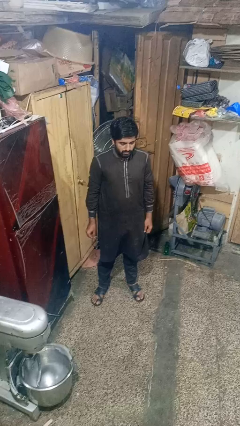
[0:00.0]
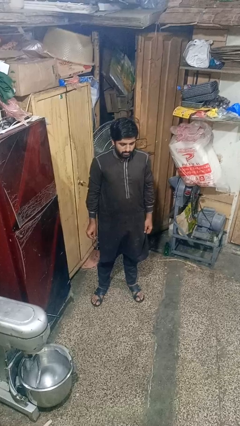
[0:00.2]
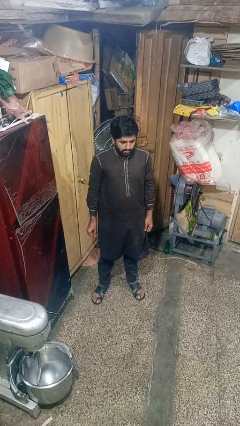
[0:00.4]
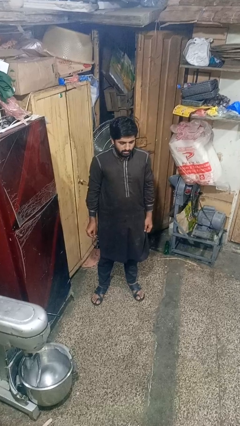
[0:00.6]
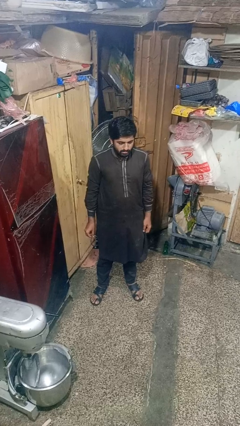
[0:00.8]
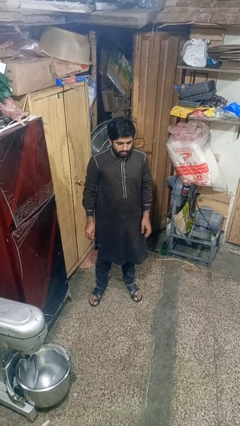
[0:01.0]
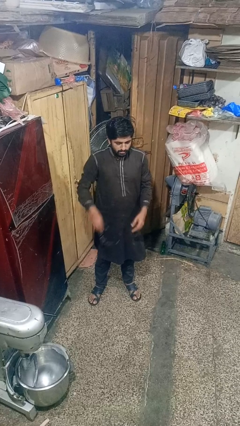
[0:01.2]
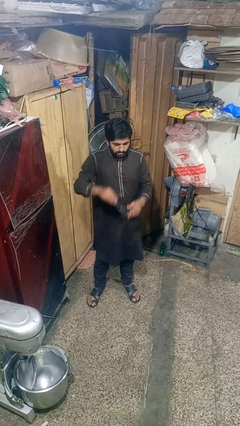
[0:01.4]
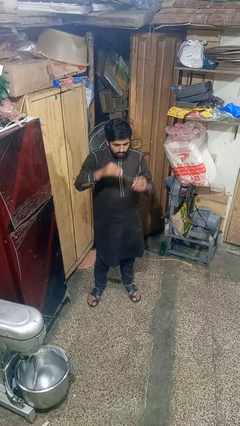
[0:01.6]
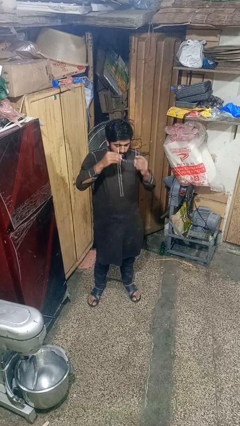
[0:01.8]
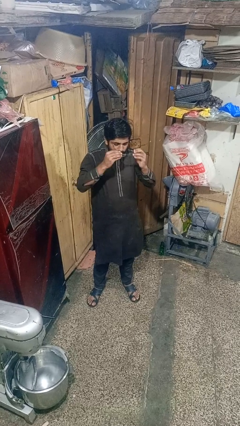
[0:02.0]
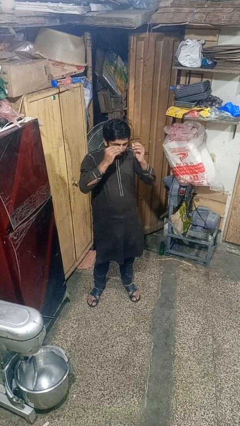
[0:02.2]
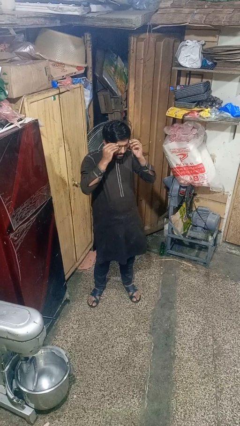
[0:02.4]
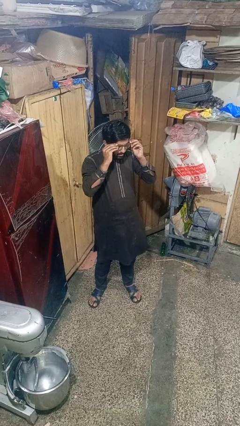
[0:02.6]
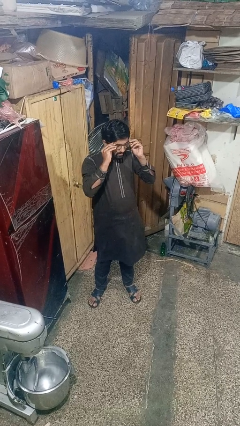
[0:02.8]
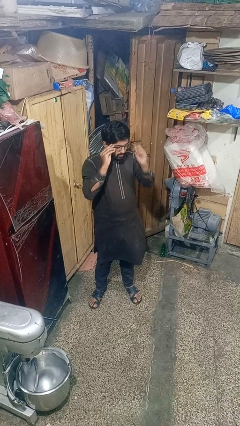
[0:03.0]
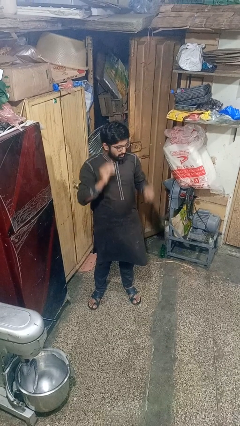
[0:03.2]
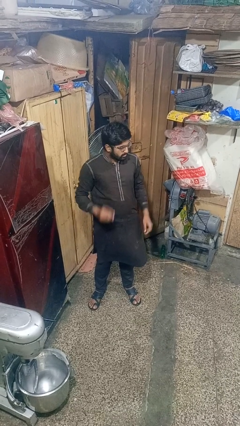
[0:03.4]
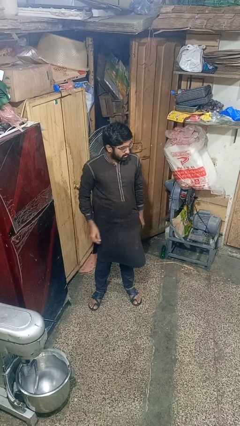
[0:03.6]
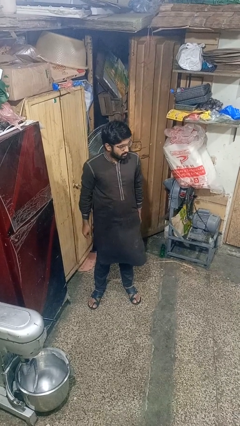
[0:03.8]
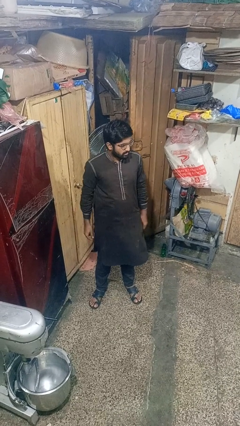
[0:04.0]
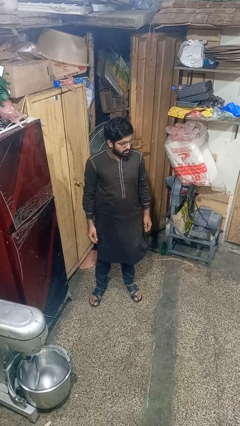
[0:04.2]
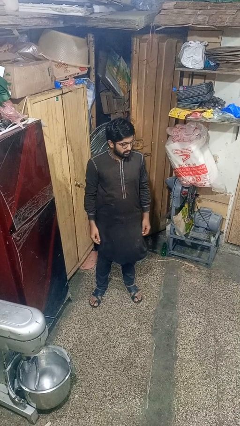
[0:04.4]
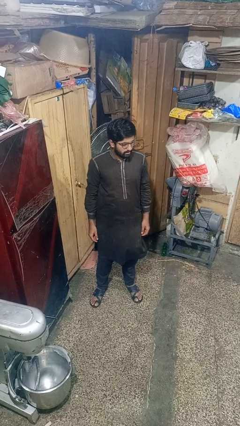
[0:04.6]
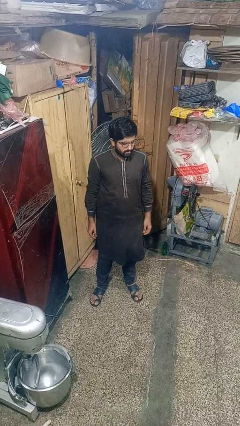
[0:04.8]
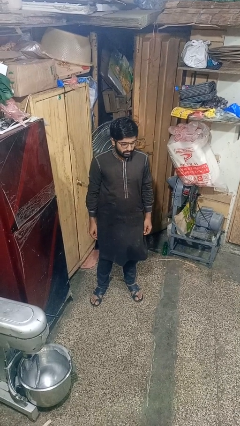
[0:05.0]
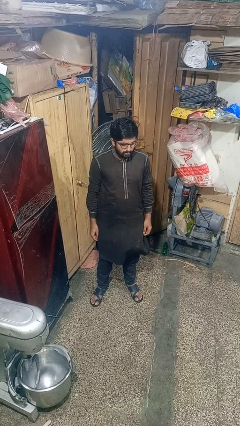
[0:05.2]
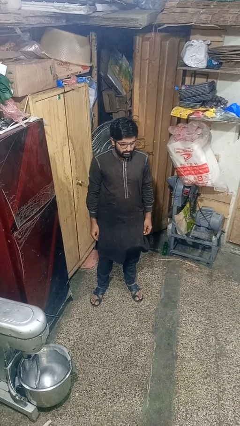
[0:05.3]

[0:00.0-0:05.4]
person puts on glasses

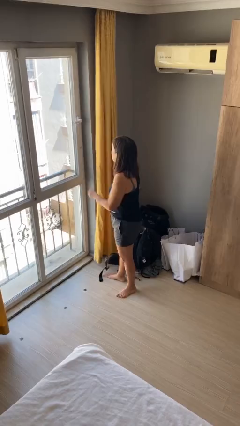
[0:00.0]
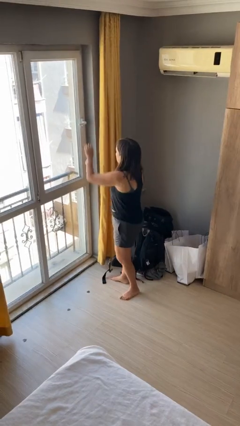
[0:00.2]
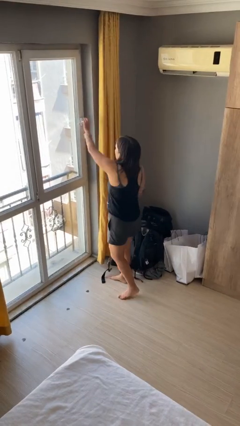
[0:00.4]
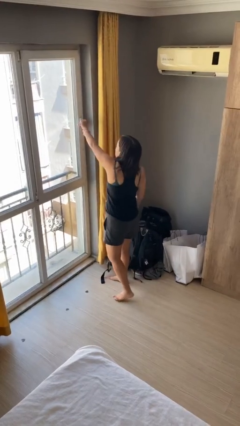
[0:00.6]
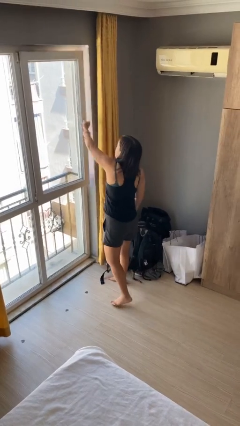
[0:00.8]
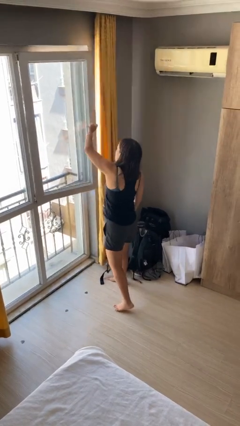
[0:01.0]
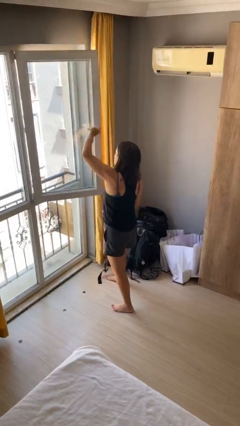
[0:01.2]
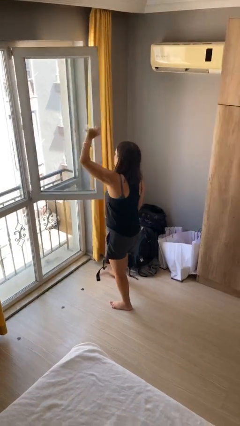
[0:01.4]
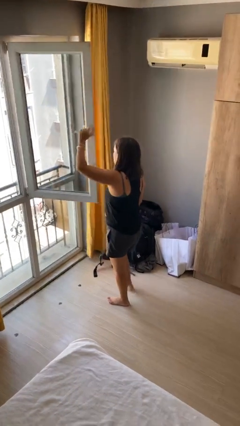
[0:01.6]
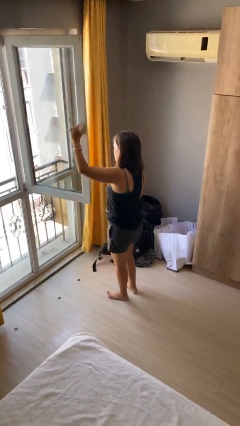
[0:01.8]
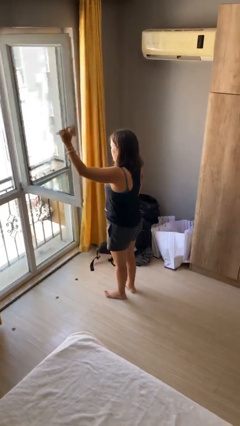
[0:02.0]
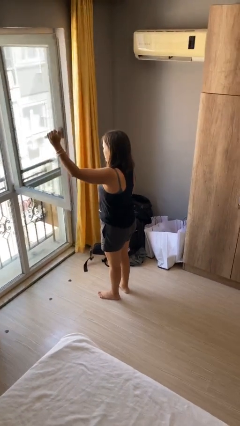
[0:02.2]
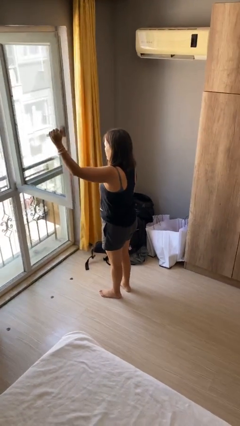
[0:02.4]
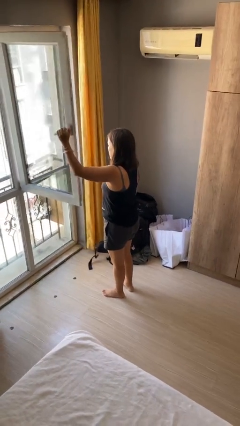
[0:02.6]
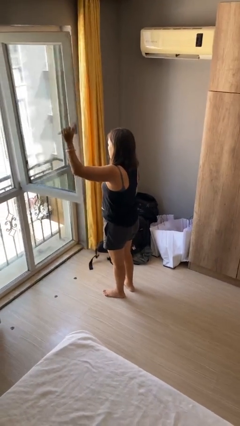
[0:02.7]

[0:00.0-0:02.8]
person opens home window

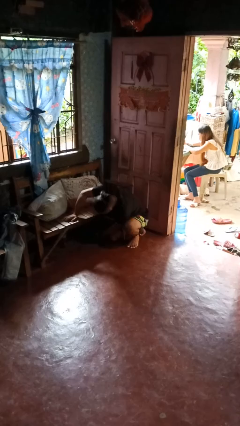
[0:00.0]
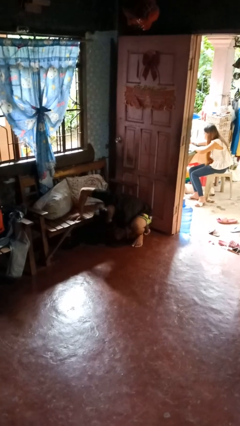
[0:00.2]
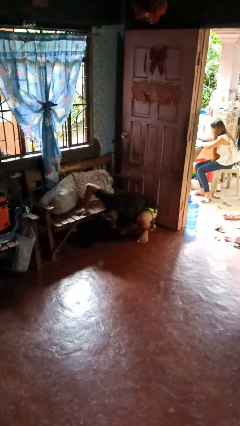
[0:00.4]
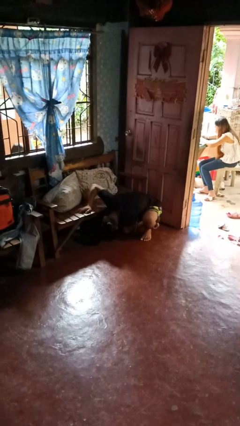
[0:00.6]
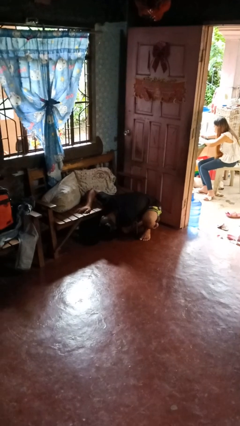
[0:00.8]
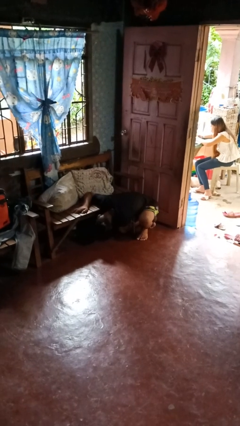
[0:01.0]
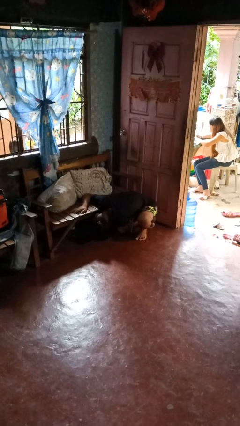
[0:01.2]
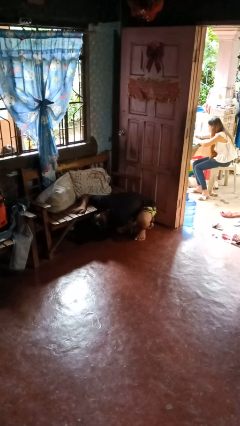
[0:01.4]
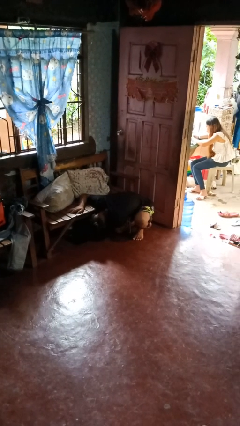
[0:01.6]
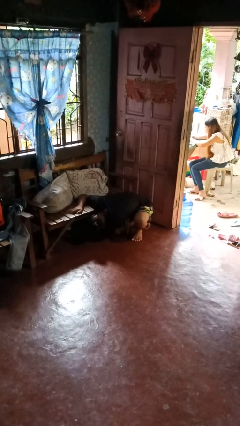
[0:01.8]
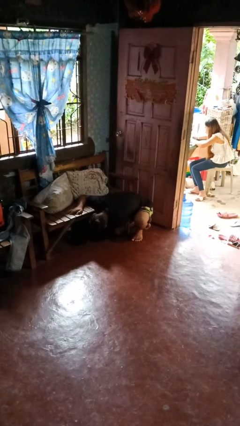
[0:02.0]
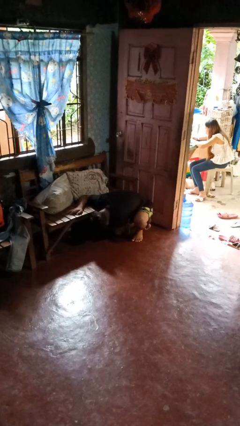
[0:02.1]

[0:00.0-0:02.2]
person searches under couch

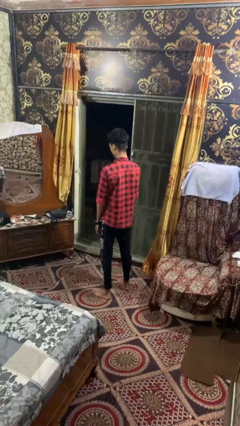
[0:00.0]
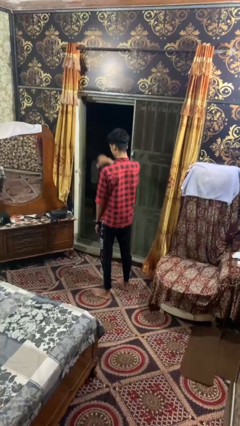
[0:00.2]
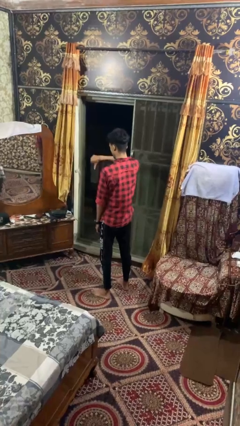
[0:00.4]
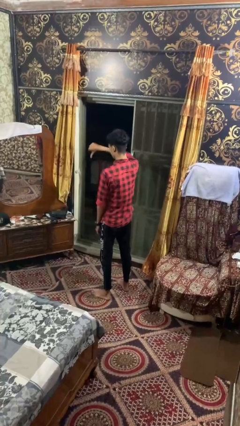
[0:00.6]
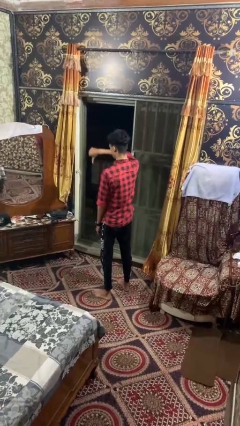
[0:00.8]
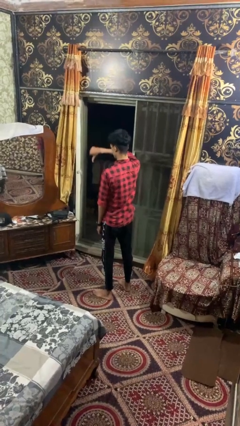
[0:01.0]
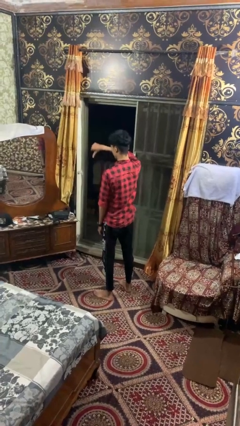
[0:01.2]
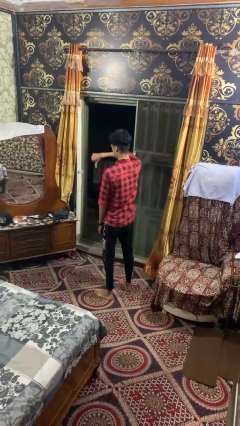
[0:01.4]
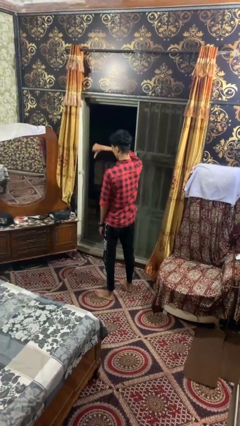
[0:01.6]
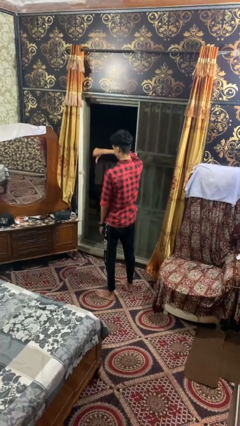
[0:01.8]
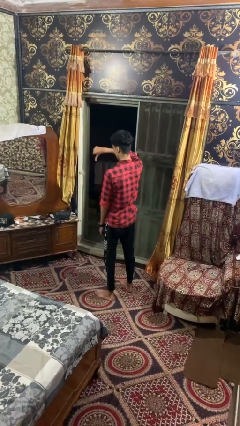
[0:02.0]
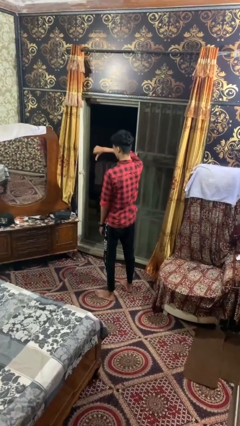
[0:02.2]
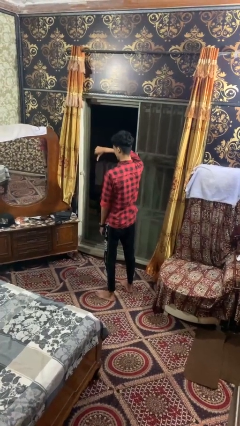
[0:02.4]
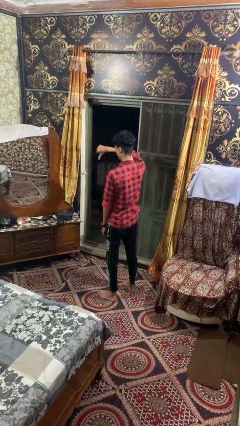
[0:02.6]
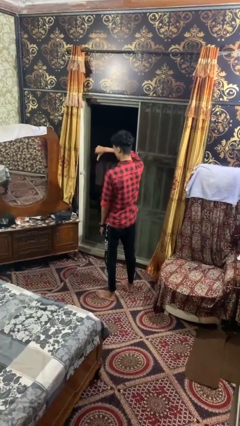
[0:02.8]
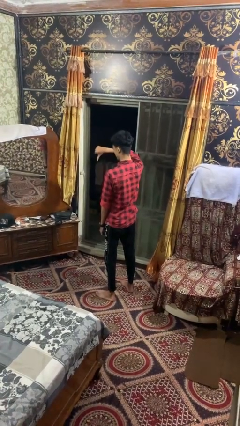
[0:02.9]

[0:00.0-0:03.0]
person gestures thumbs down

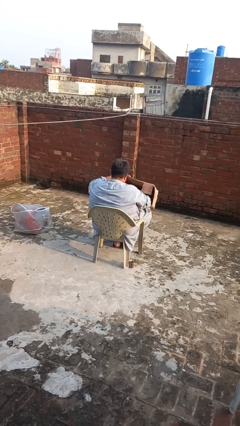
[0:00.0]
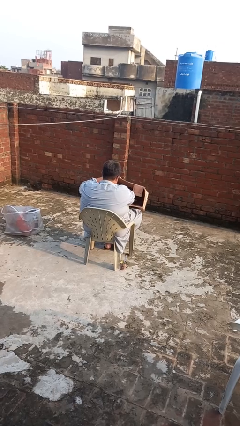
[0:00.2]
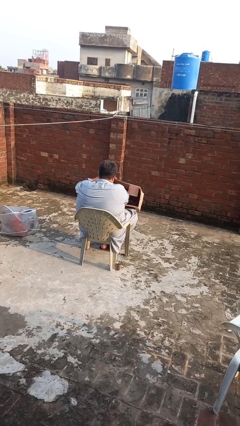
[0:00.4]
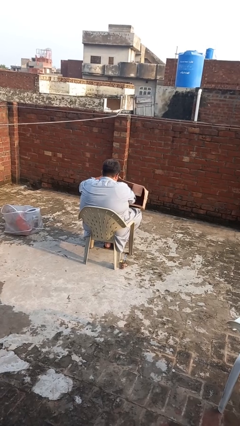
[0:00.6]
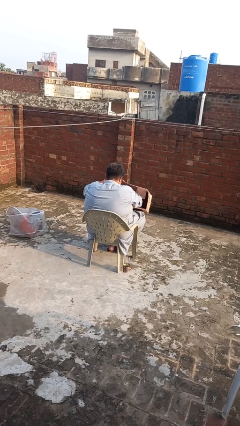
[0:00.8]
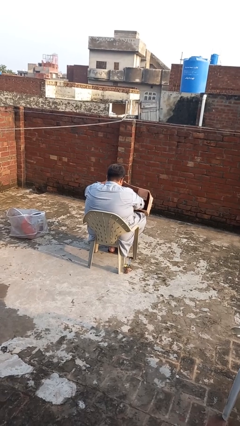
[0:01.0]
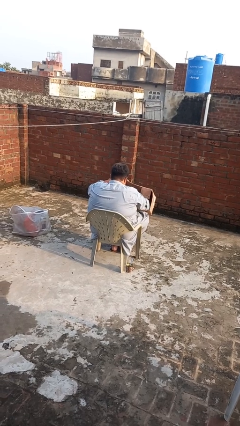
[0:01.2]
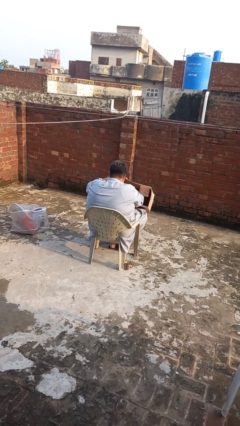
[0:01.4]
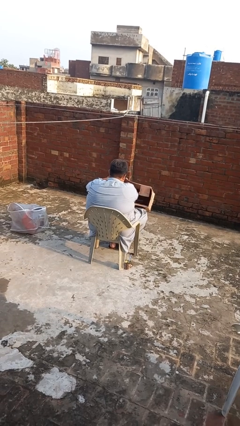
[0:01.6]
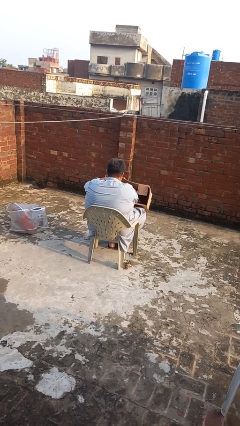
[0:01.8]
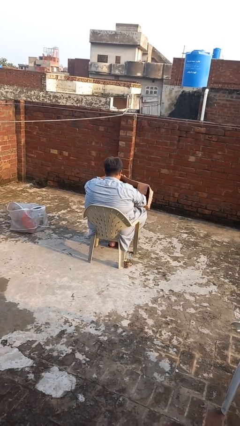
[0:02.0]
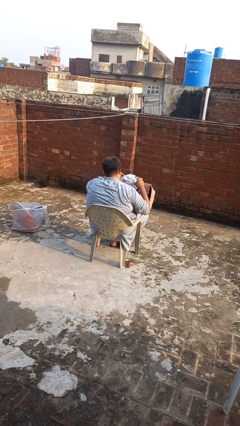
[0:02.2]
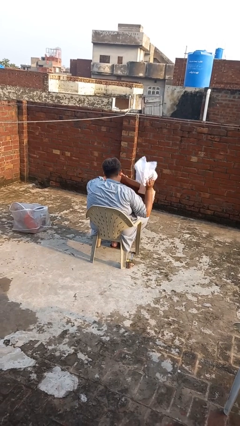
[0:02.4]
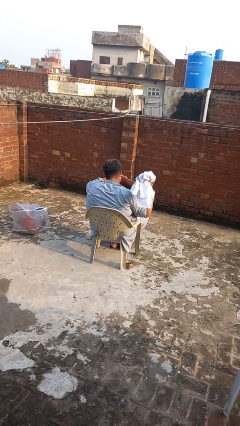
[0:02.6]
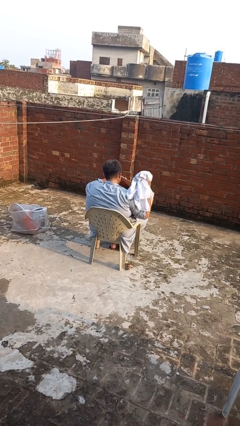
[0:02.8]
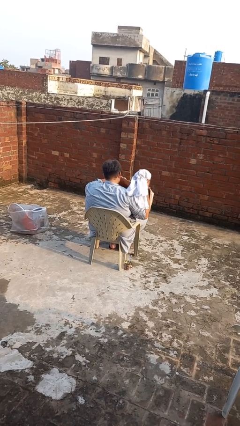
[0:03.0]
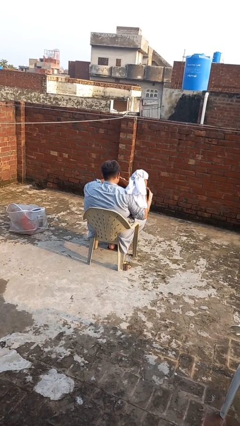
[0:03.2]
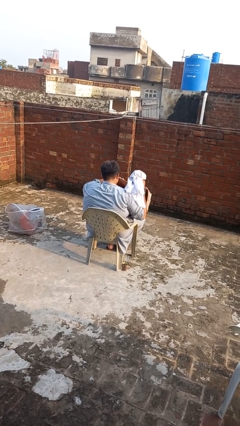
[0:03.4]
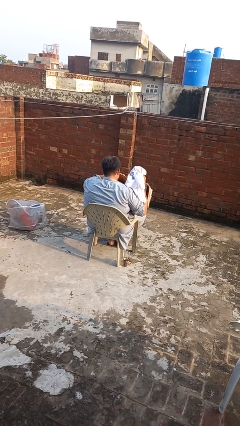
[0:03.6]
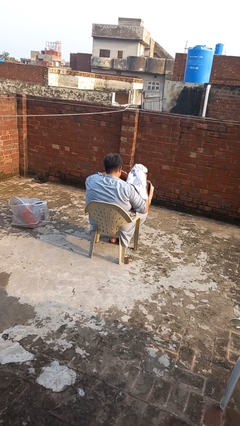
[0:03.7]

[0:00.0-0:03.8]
person searches in box

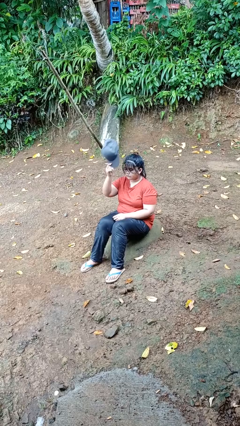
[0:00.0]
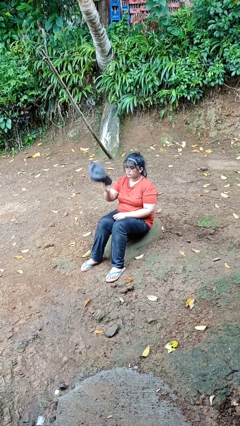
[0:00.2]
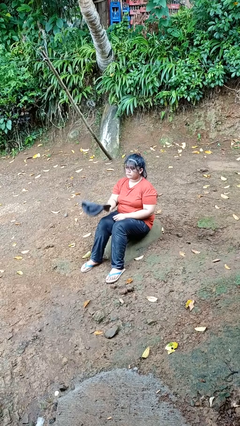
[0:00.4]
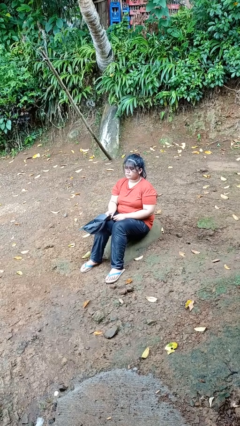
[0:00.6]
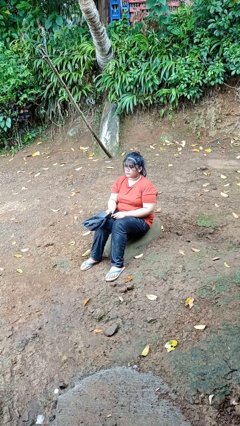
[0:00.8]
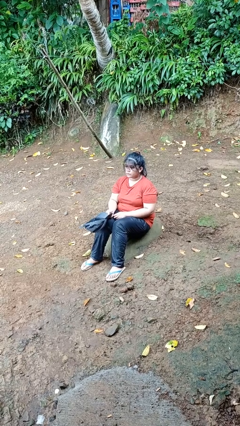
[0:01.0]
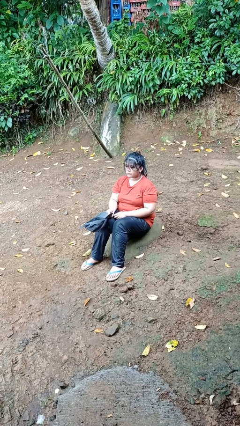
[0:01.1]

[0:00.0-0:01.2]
person takes off hat
